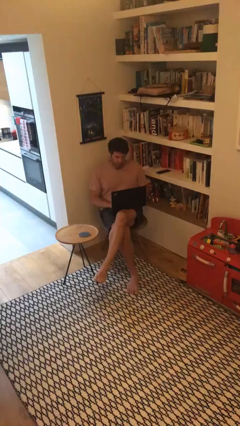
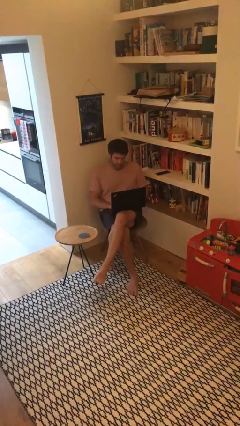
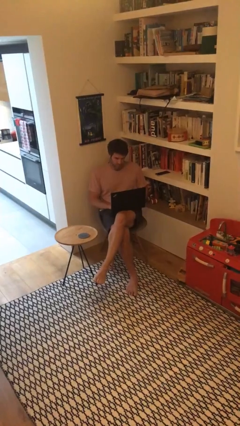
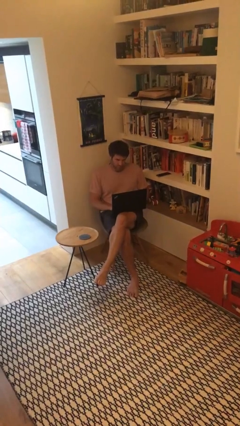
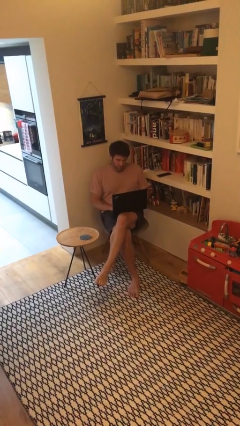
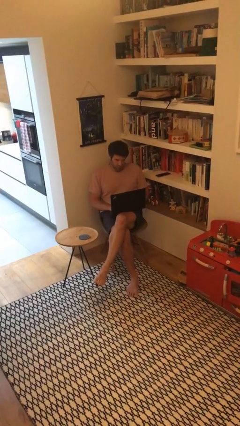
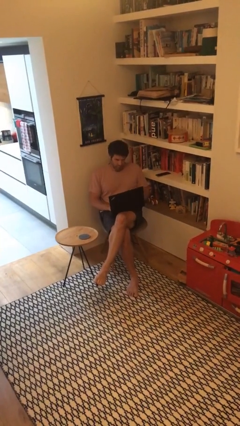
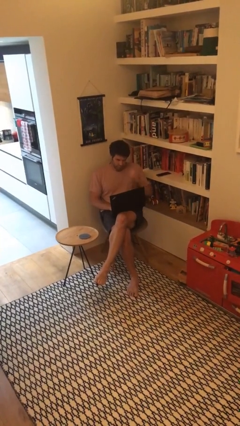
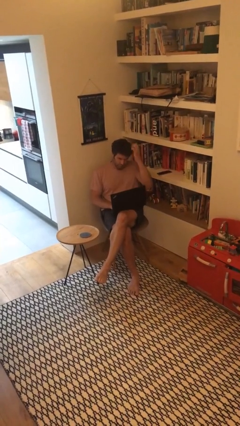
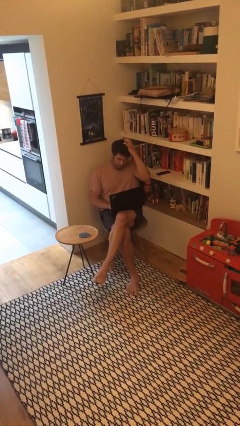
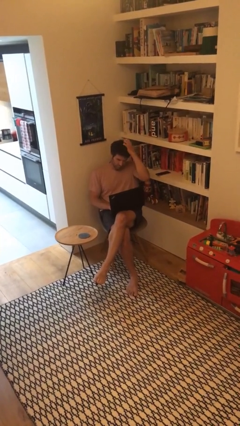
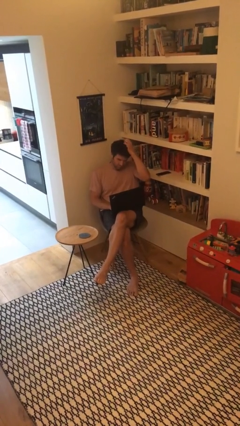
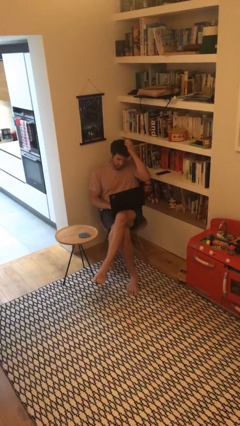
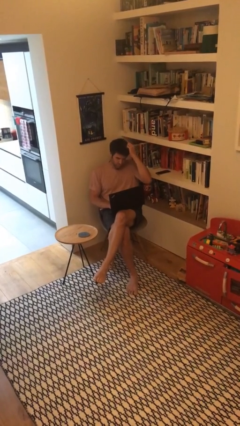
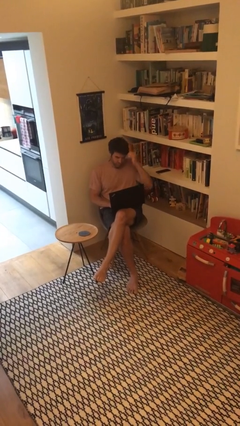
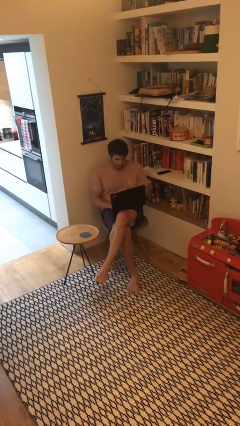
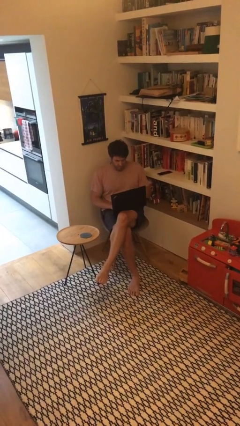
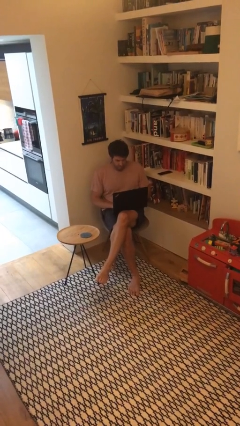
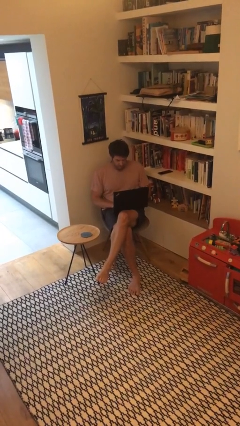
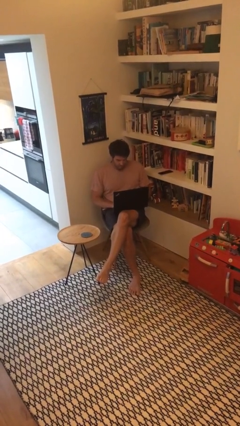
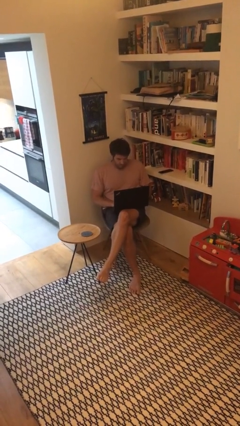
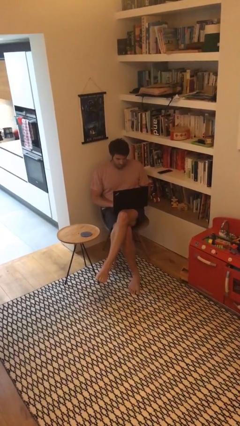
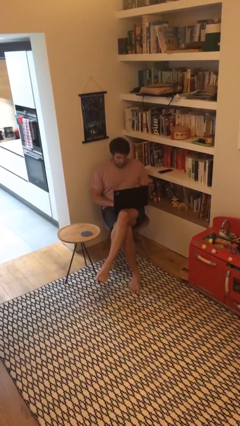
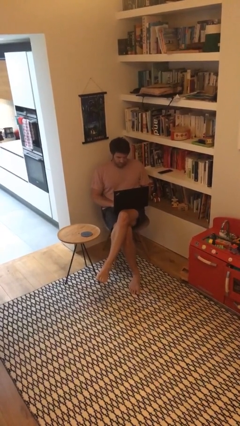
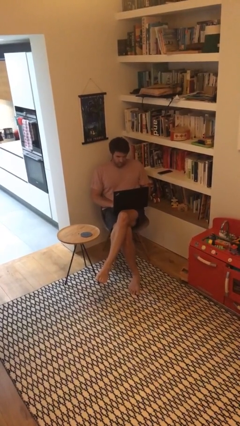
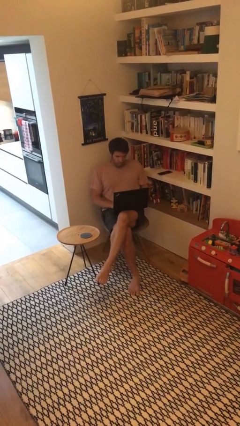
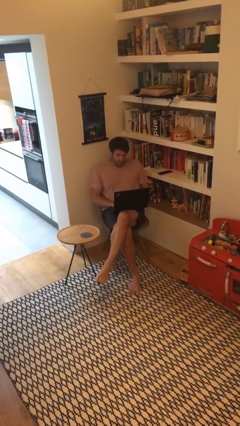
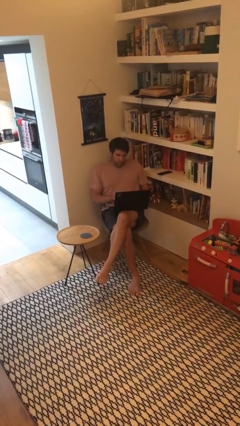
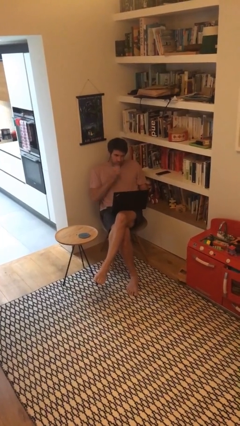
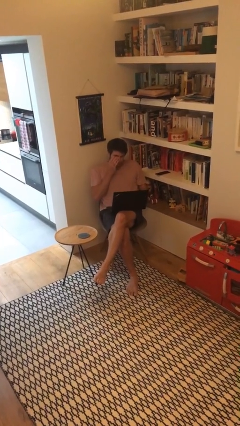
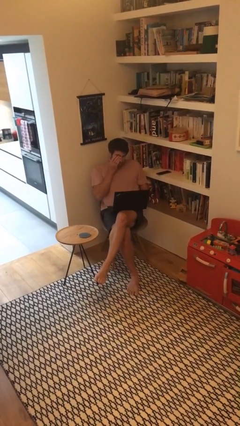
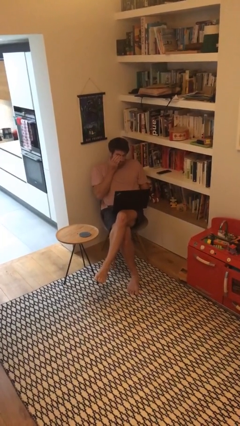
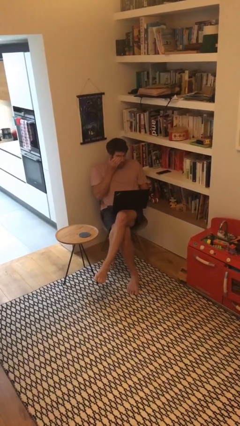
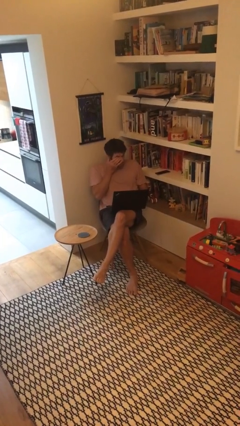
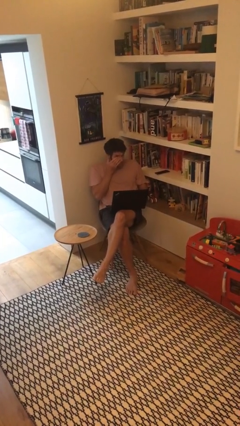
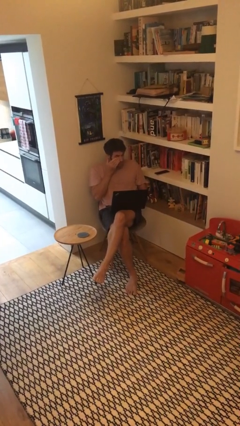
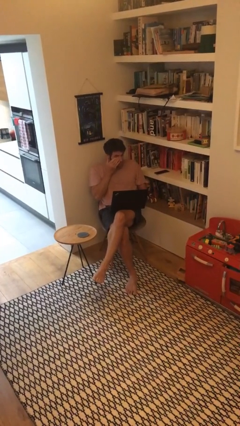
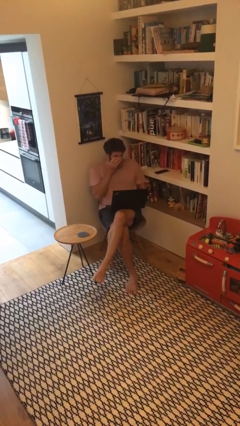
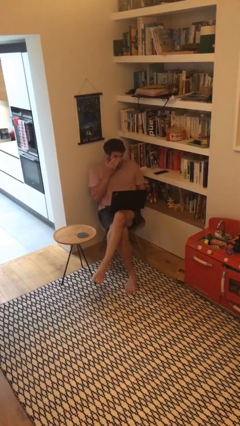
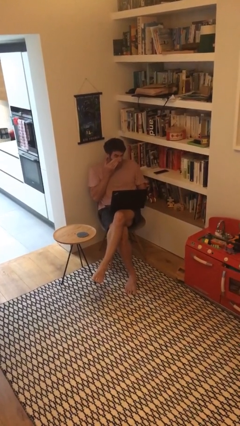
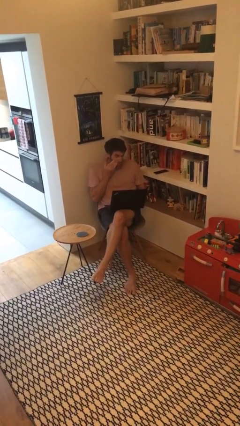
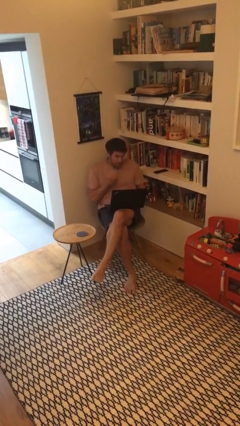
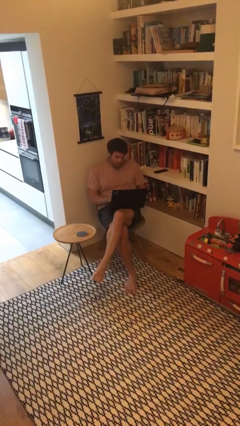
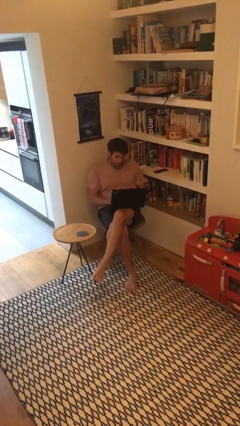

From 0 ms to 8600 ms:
person interacts with laptop

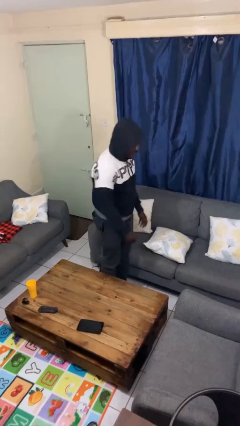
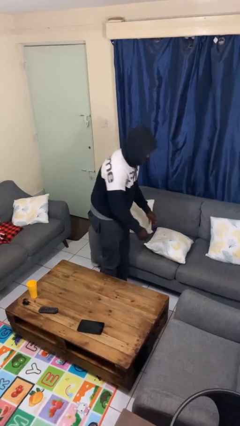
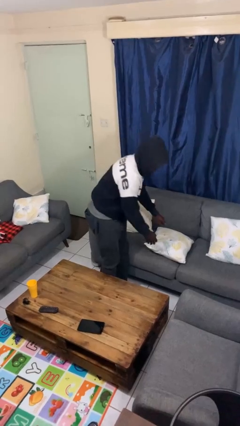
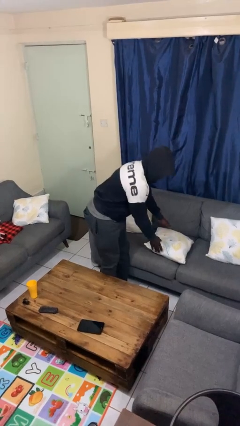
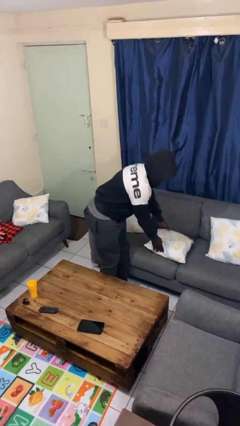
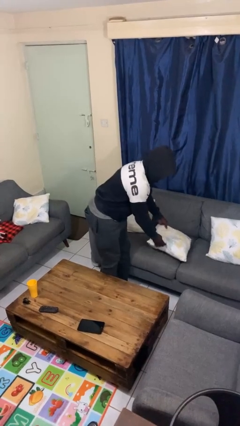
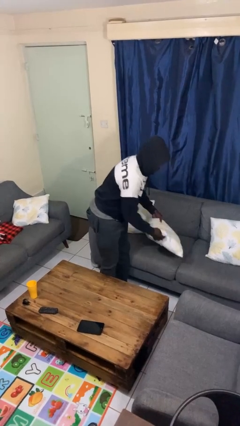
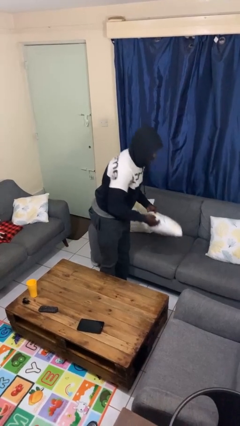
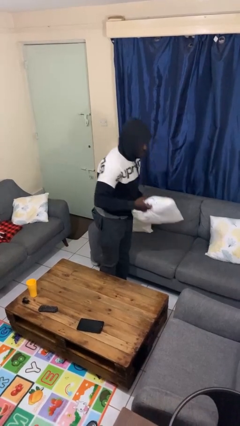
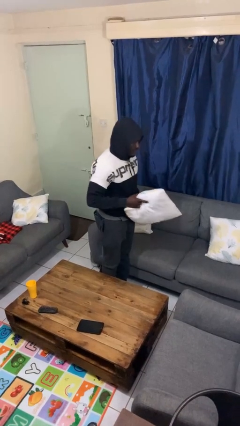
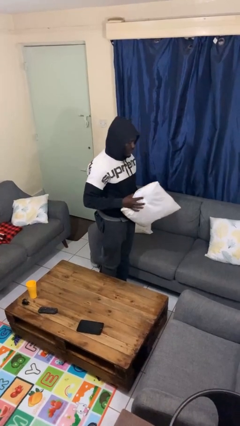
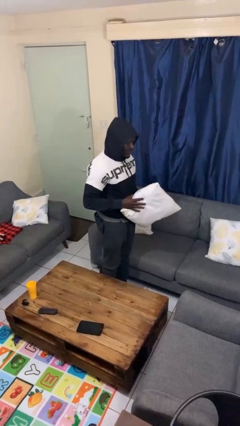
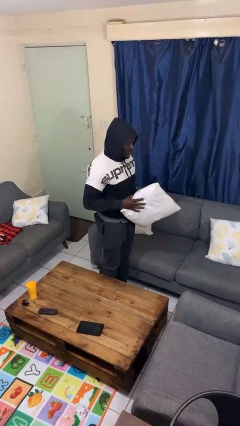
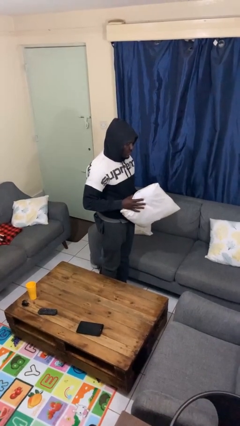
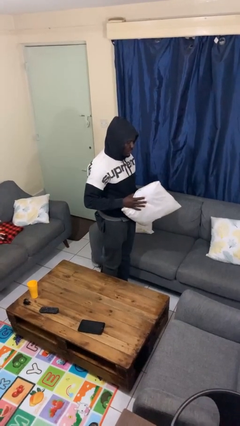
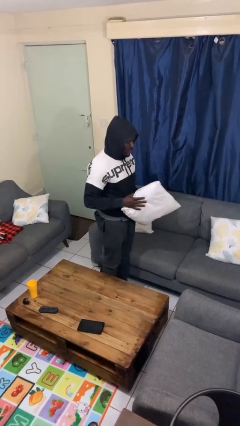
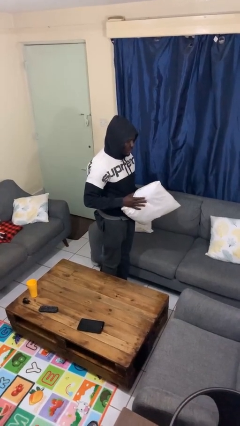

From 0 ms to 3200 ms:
person picks up object from couch

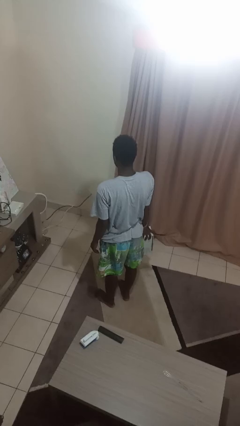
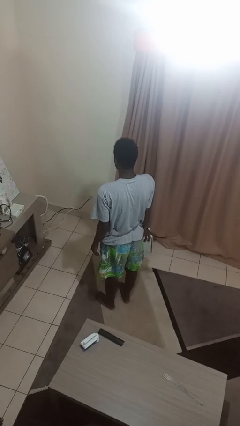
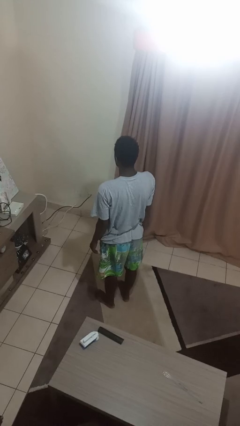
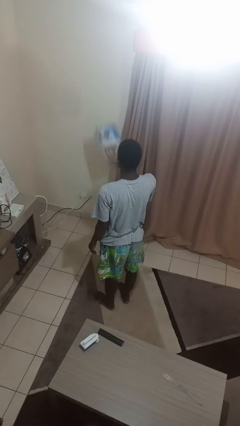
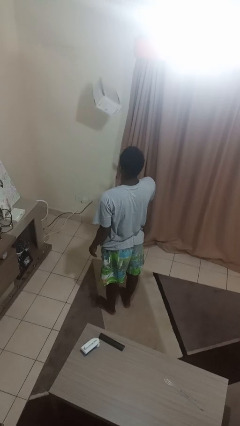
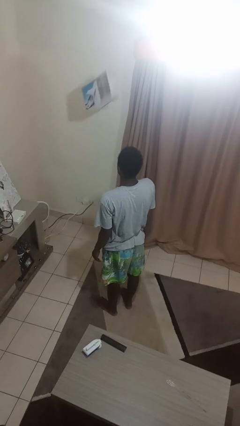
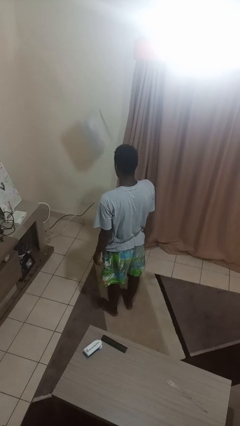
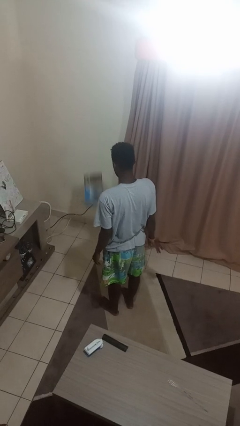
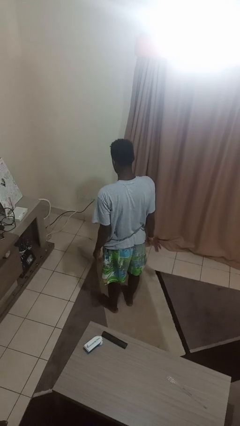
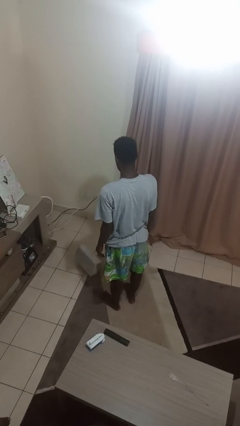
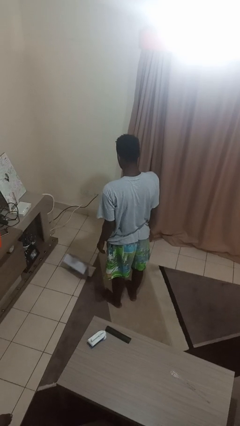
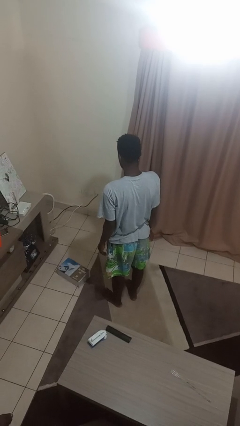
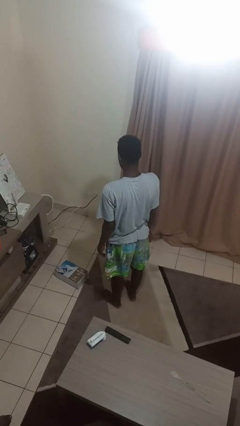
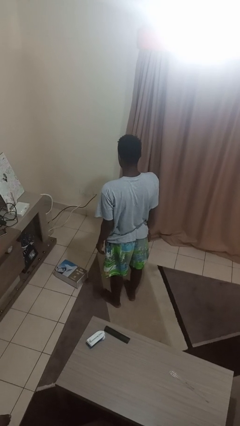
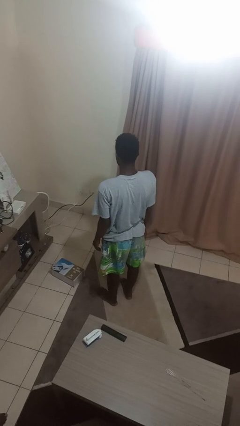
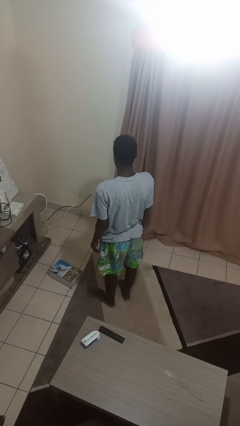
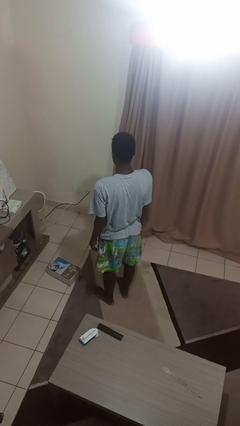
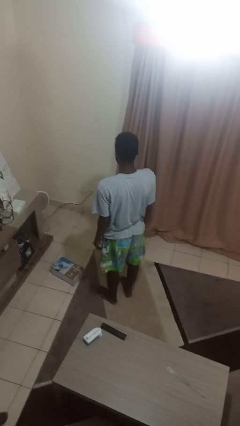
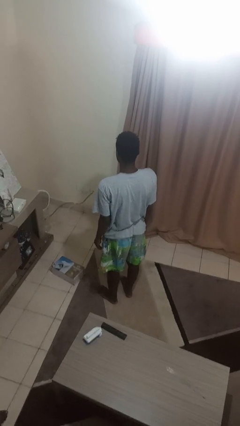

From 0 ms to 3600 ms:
person throws object into air

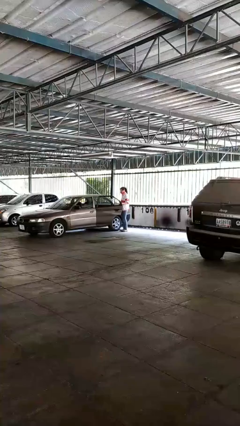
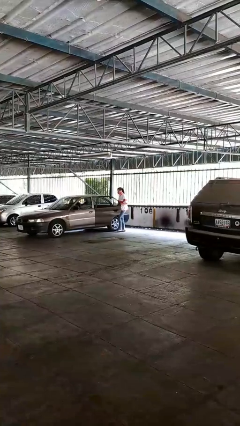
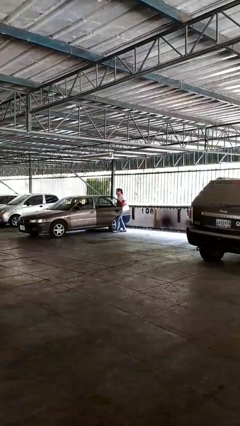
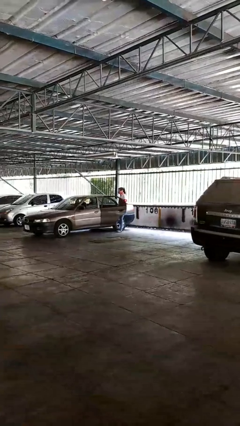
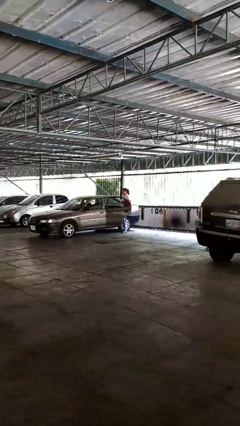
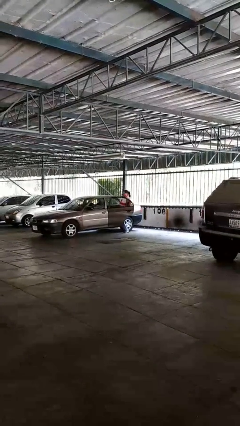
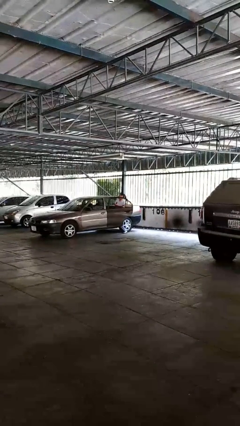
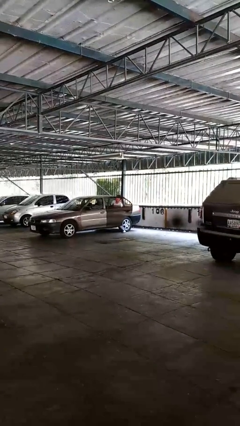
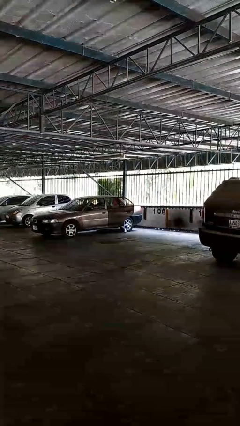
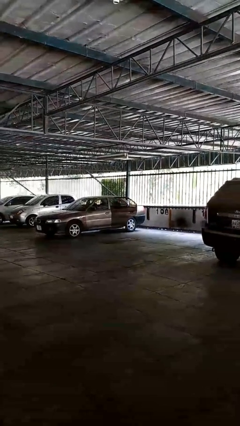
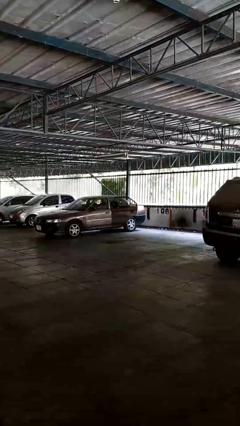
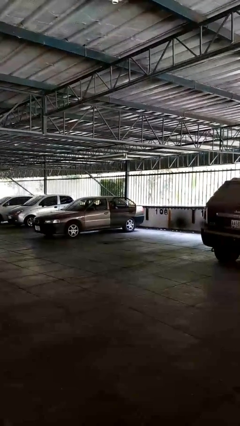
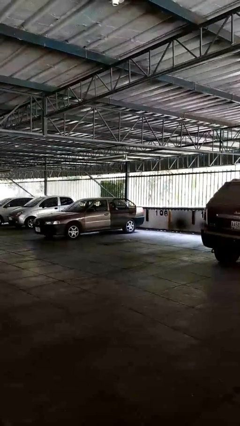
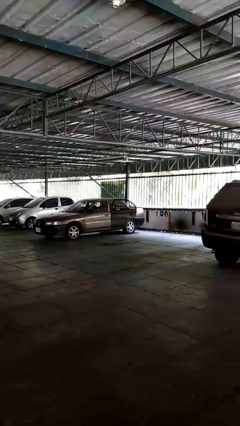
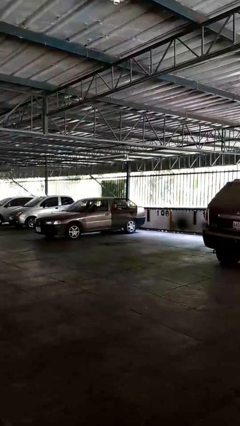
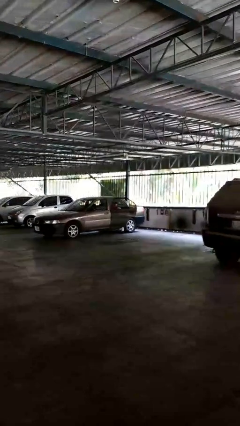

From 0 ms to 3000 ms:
person enters car
